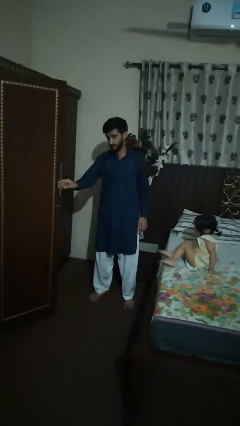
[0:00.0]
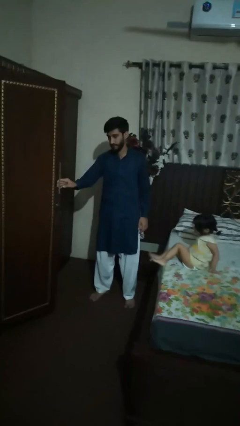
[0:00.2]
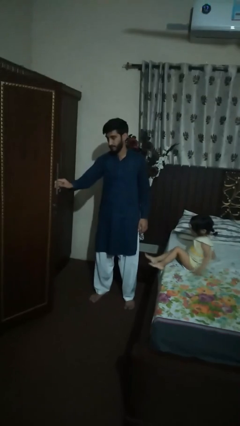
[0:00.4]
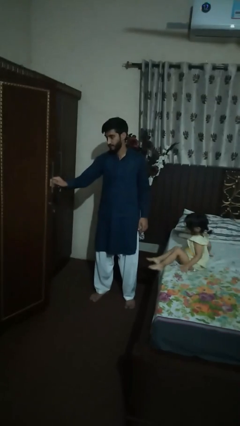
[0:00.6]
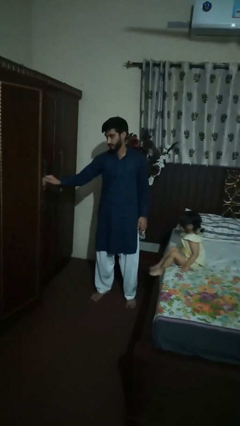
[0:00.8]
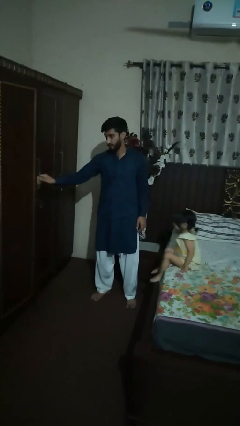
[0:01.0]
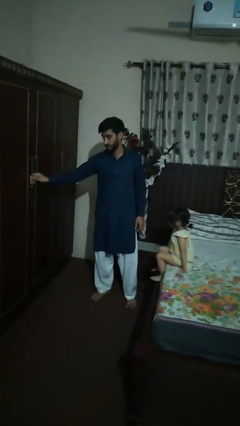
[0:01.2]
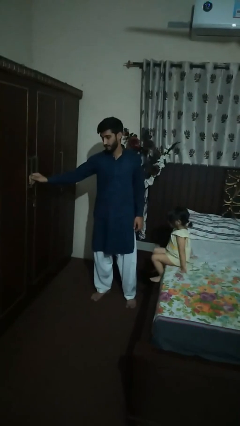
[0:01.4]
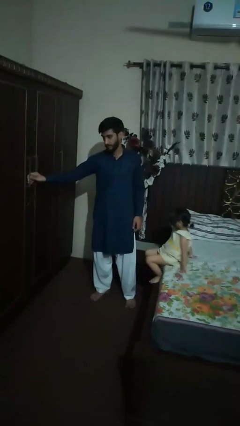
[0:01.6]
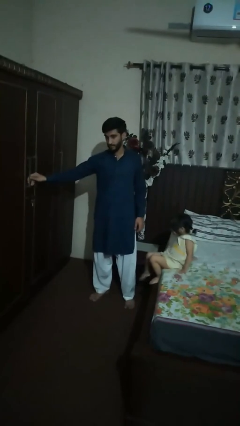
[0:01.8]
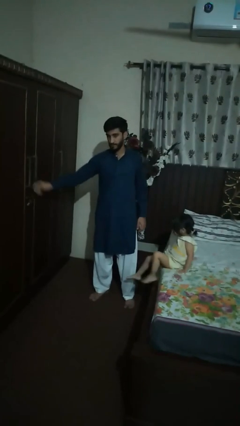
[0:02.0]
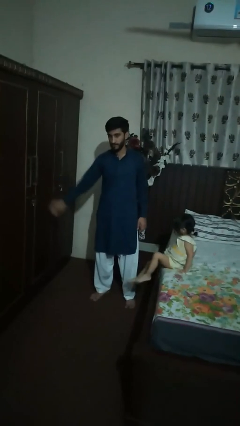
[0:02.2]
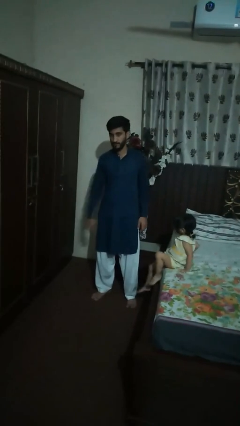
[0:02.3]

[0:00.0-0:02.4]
person closes dresser drawer

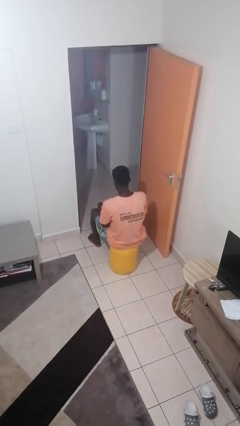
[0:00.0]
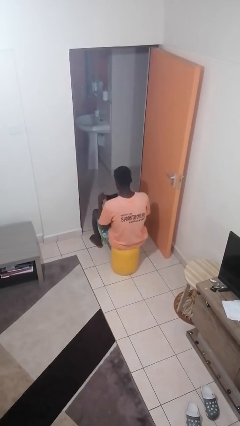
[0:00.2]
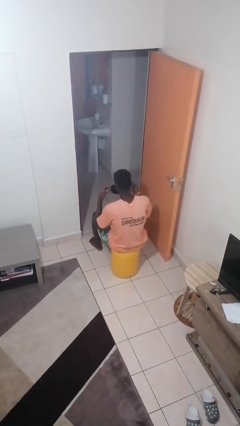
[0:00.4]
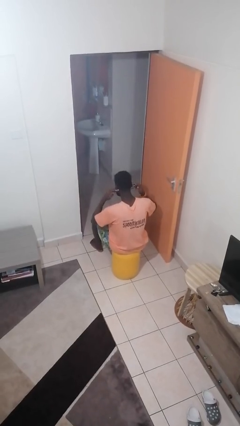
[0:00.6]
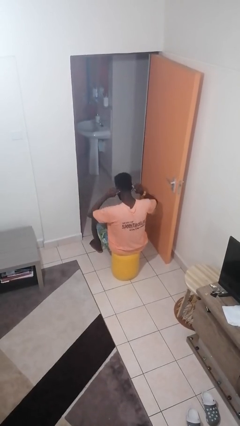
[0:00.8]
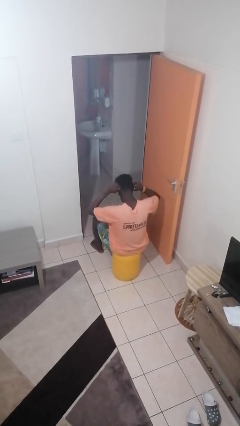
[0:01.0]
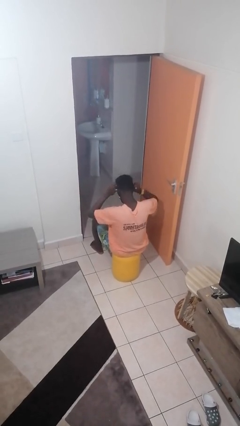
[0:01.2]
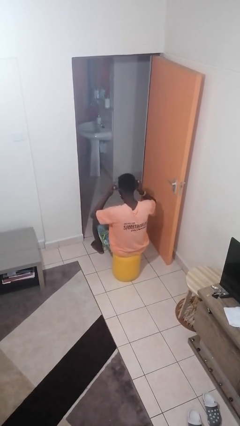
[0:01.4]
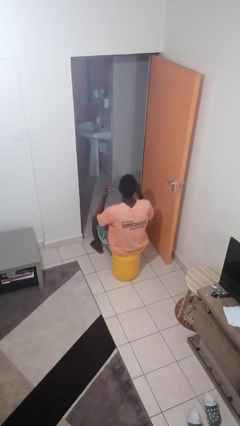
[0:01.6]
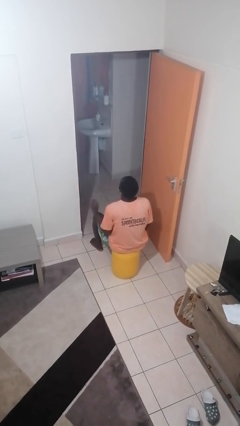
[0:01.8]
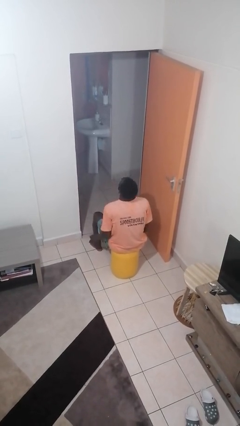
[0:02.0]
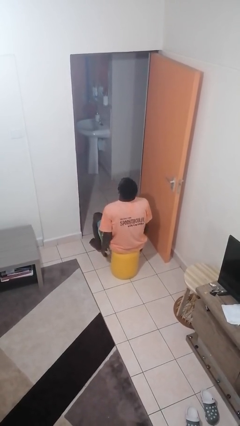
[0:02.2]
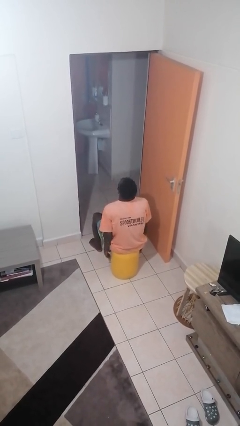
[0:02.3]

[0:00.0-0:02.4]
person puts on facemask

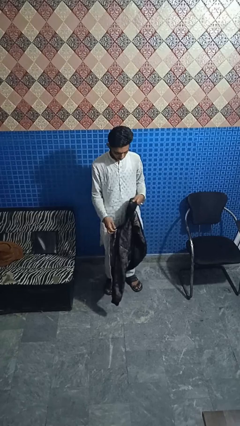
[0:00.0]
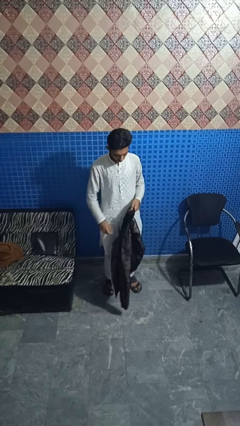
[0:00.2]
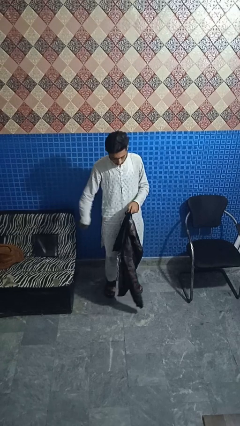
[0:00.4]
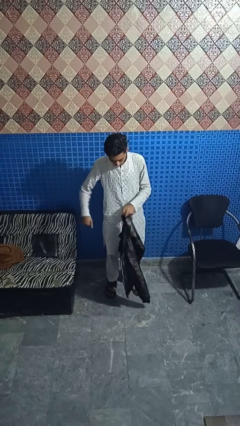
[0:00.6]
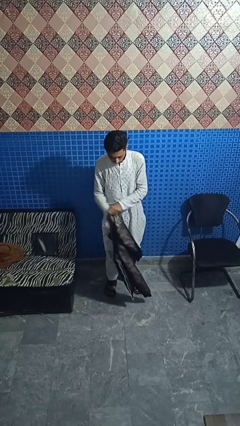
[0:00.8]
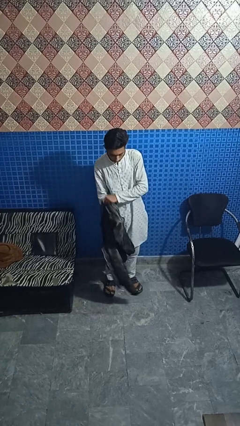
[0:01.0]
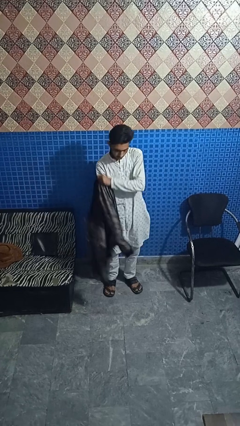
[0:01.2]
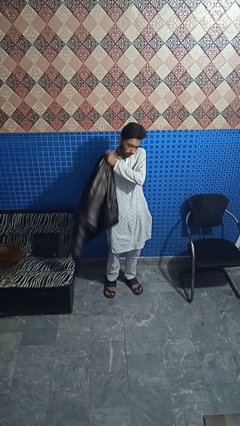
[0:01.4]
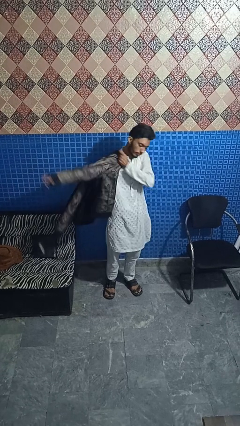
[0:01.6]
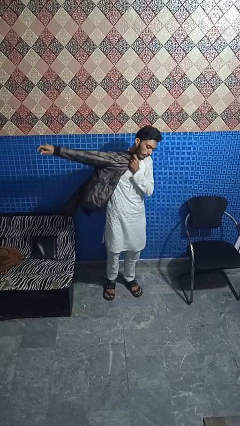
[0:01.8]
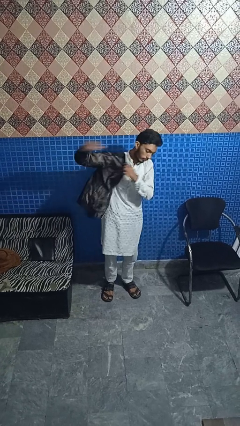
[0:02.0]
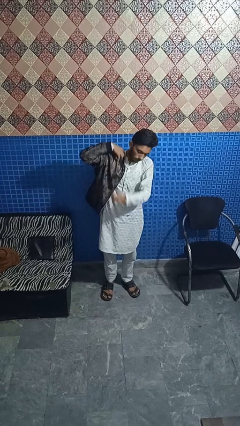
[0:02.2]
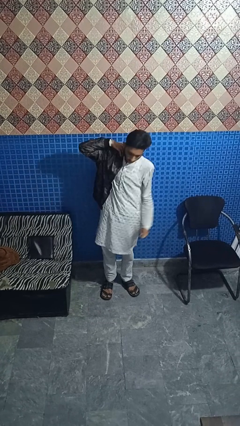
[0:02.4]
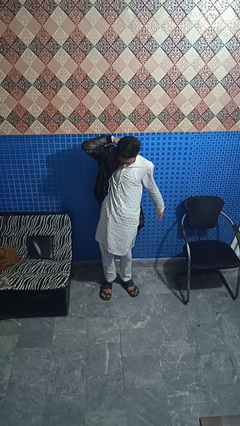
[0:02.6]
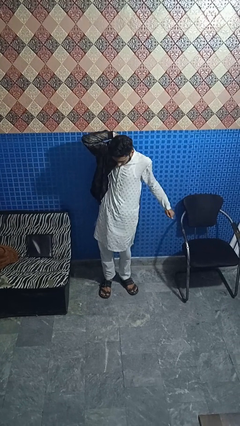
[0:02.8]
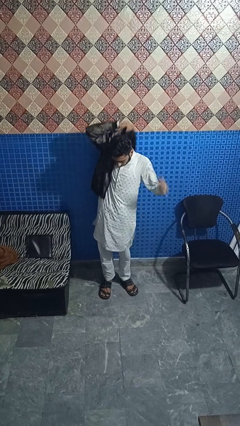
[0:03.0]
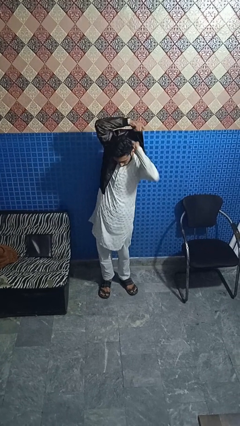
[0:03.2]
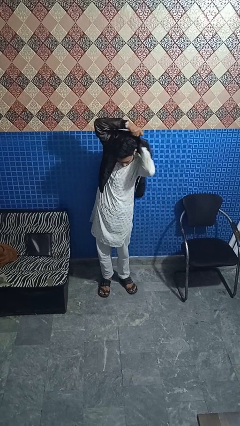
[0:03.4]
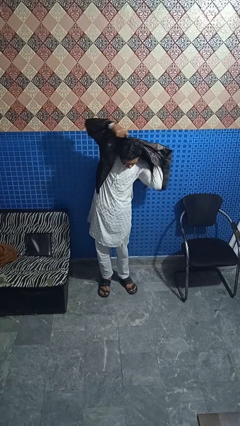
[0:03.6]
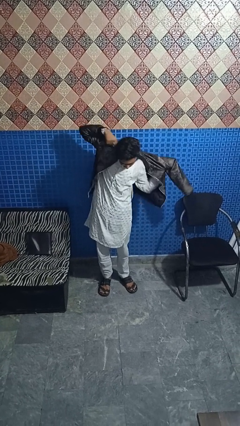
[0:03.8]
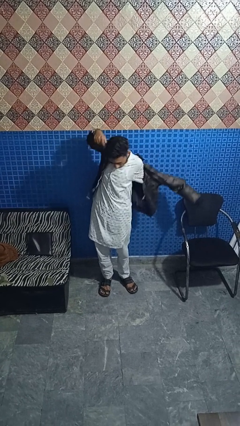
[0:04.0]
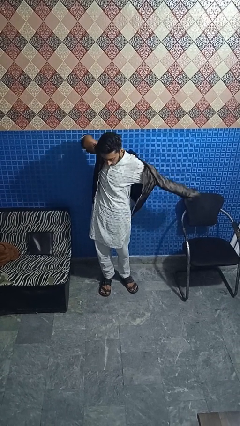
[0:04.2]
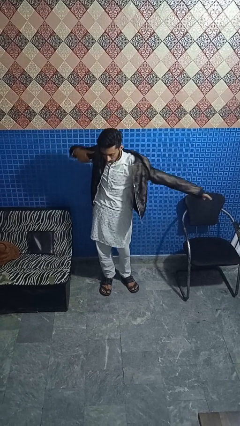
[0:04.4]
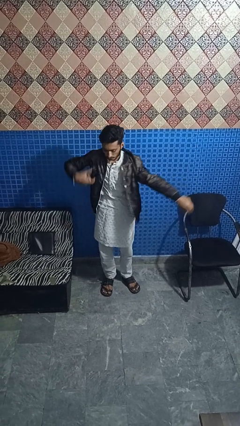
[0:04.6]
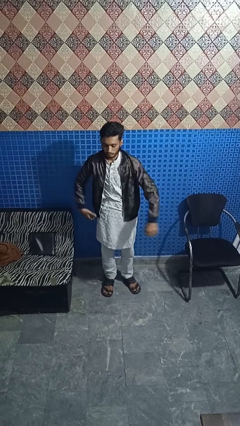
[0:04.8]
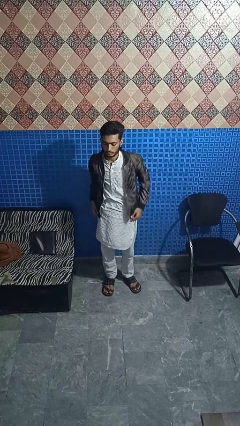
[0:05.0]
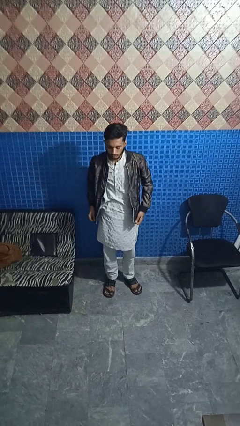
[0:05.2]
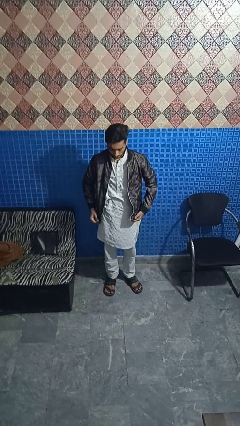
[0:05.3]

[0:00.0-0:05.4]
person puts on jacket

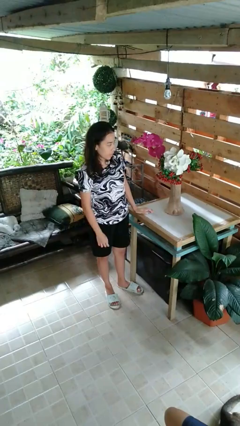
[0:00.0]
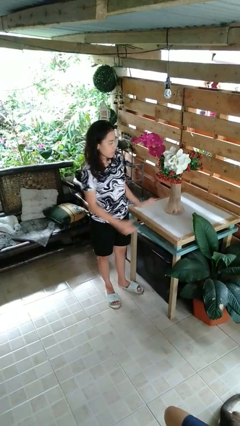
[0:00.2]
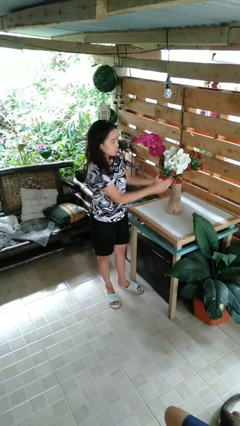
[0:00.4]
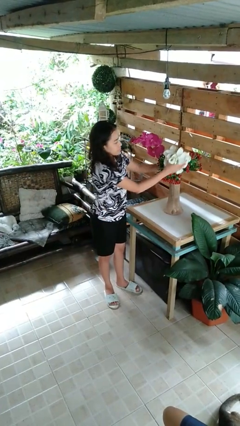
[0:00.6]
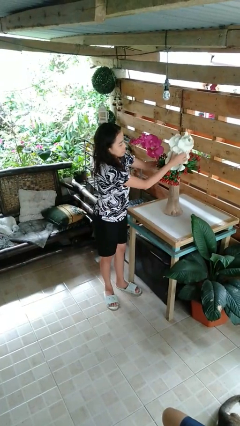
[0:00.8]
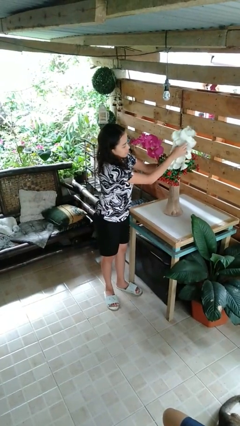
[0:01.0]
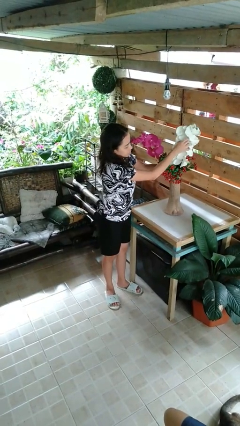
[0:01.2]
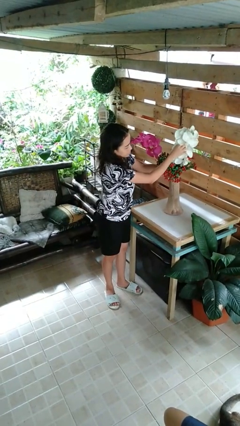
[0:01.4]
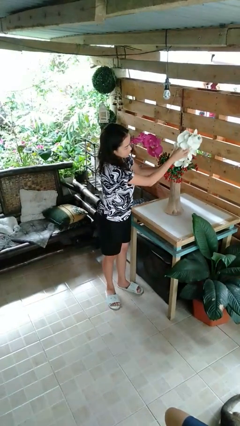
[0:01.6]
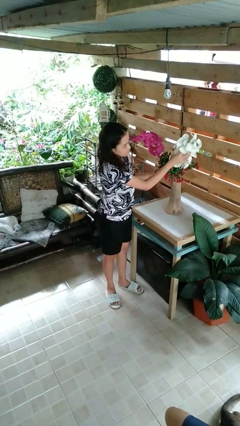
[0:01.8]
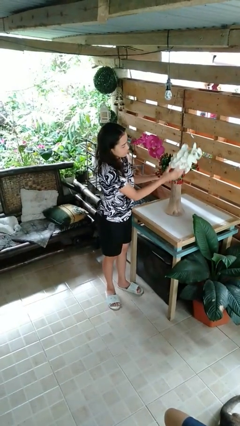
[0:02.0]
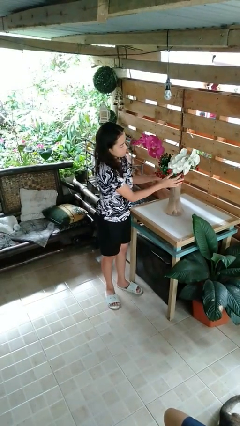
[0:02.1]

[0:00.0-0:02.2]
person arranges flowers in vase

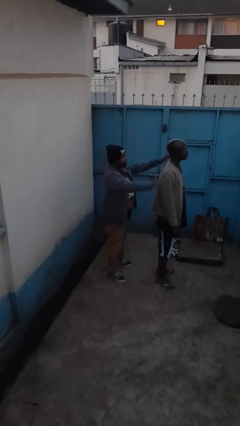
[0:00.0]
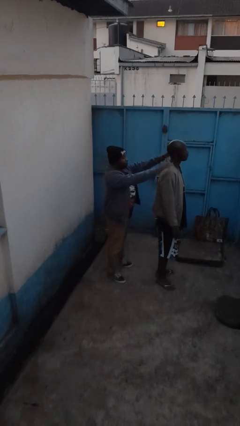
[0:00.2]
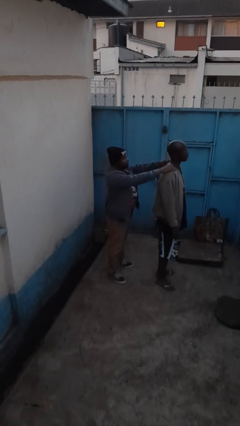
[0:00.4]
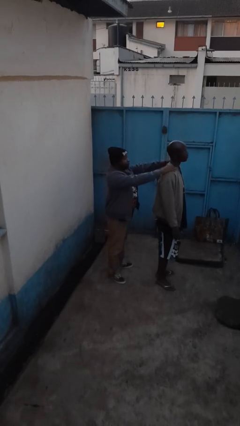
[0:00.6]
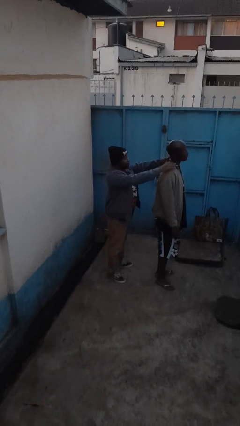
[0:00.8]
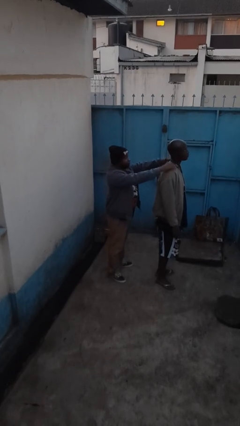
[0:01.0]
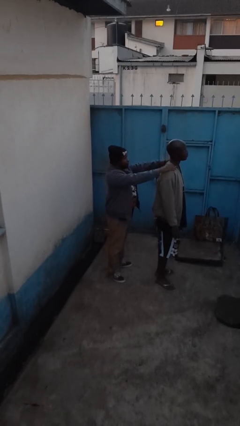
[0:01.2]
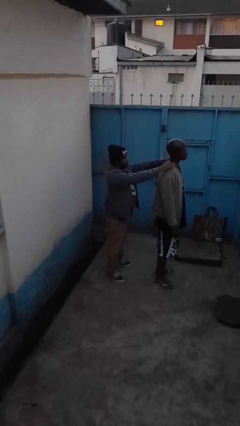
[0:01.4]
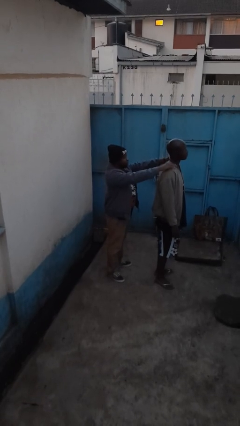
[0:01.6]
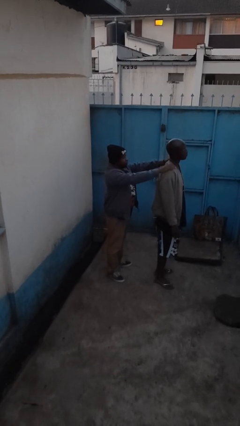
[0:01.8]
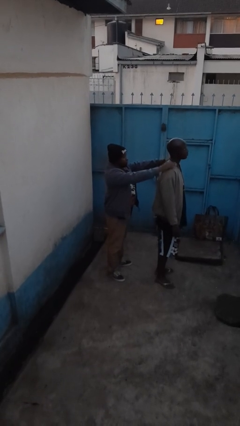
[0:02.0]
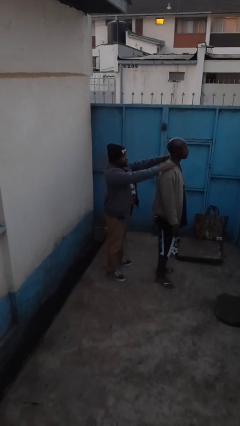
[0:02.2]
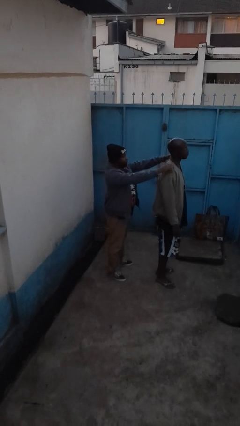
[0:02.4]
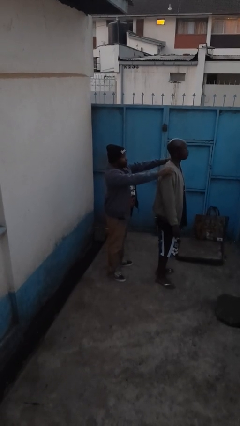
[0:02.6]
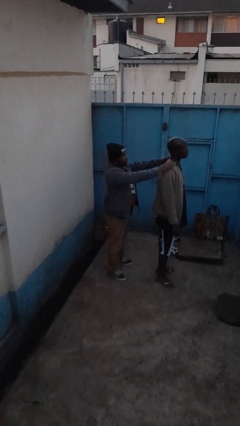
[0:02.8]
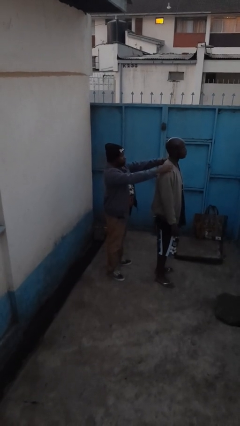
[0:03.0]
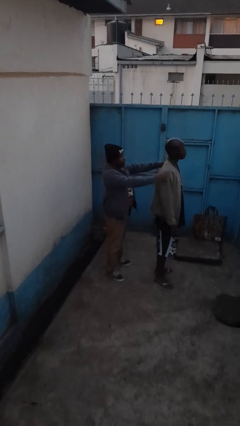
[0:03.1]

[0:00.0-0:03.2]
person pounds shoulders of person

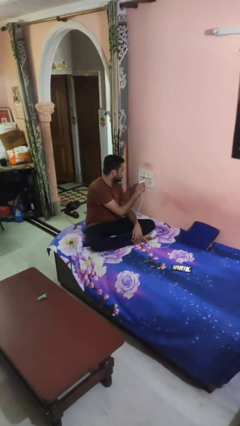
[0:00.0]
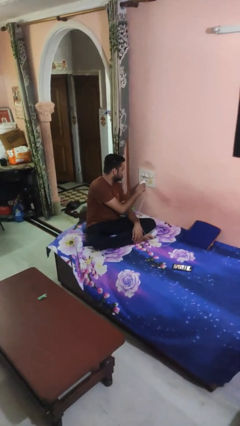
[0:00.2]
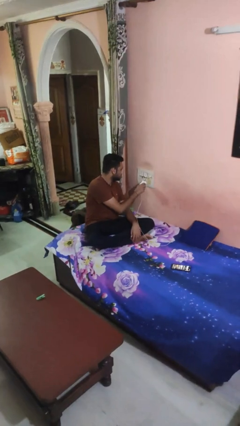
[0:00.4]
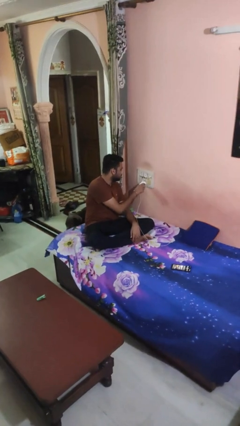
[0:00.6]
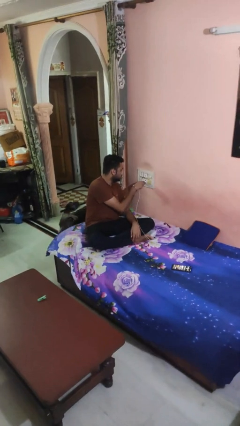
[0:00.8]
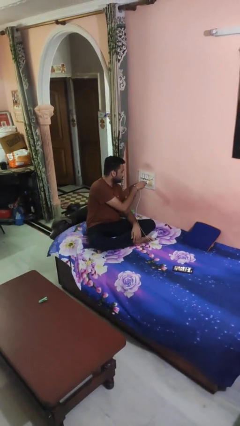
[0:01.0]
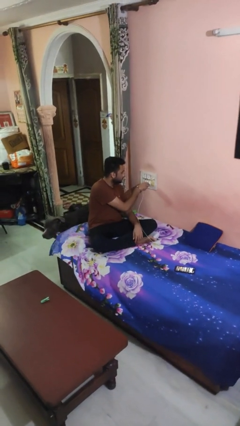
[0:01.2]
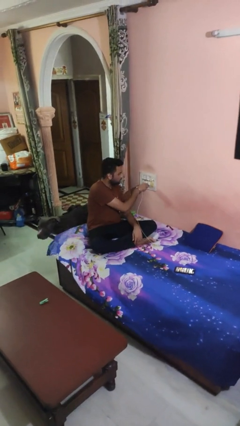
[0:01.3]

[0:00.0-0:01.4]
person plugs into electrical socket

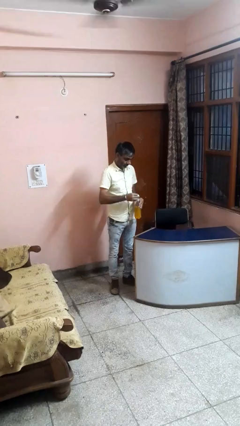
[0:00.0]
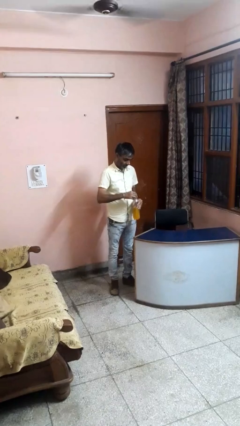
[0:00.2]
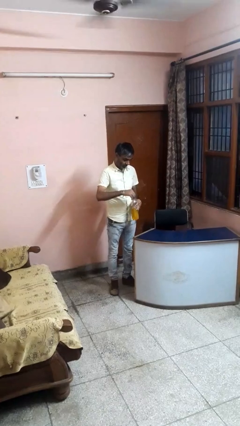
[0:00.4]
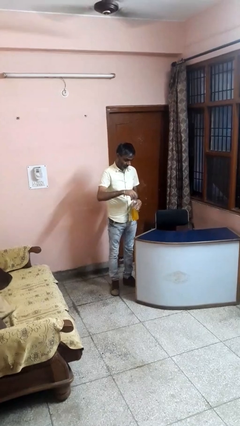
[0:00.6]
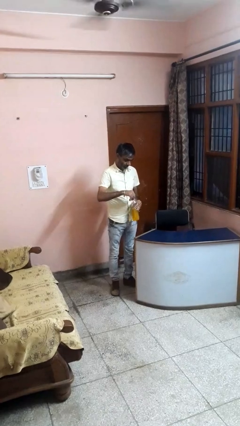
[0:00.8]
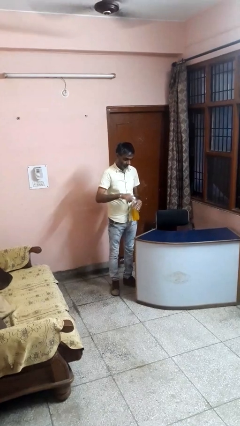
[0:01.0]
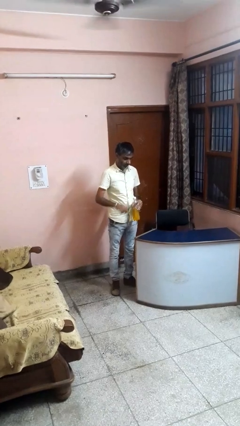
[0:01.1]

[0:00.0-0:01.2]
person screws lid to bottle
